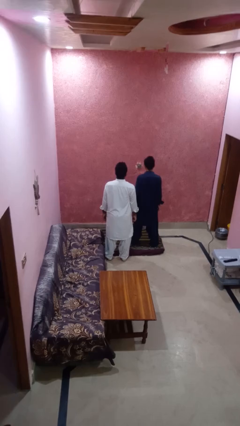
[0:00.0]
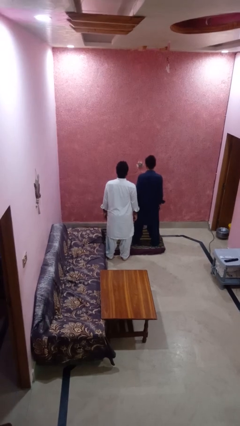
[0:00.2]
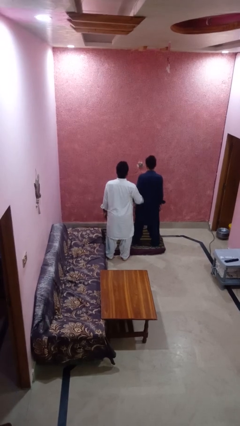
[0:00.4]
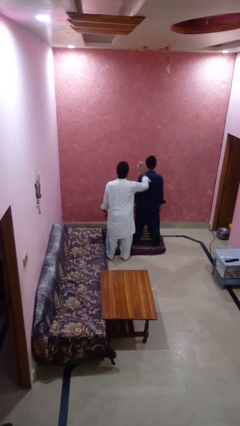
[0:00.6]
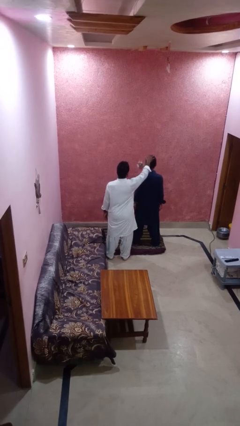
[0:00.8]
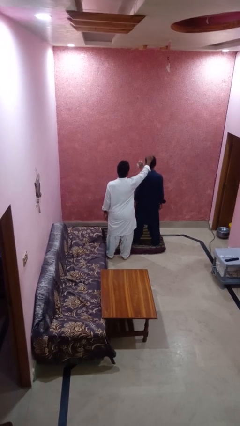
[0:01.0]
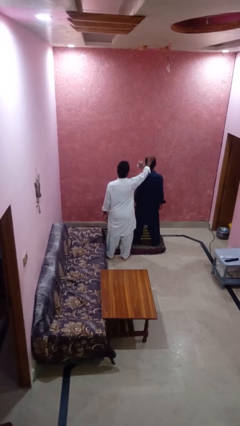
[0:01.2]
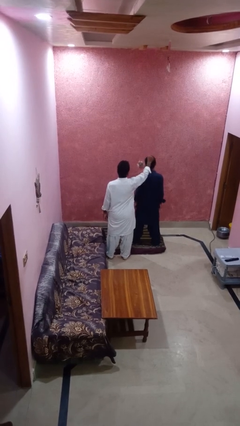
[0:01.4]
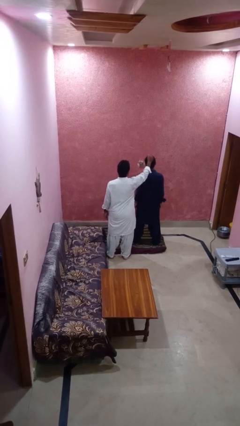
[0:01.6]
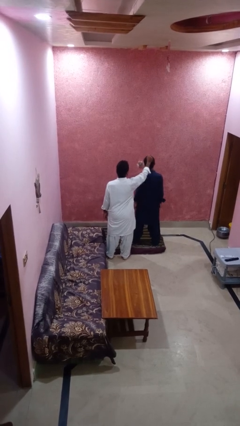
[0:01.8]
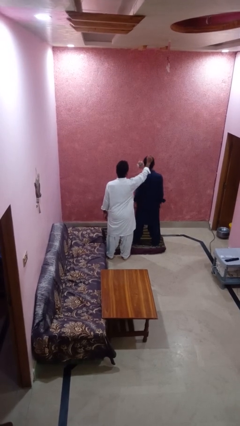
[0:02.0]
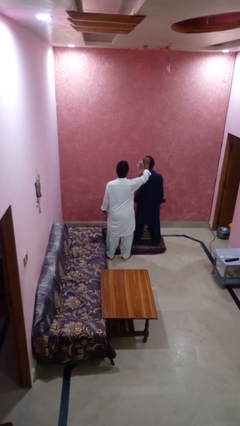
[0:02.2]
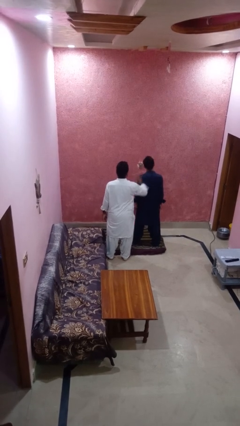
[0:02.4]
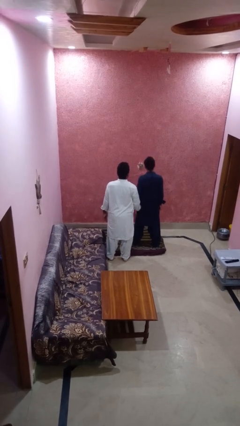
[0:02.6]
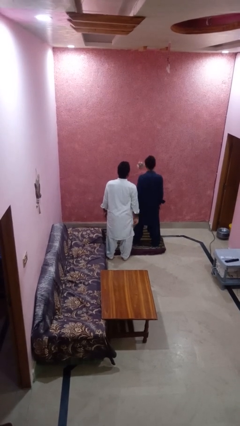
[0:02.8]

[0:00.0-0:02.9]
person grabs person by hair

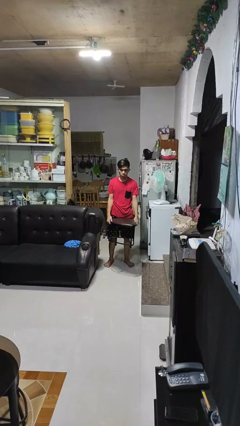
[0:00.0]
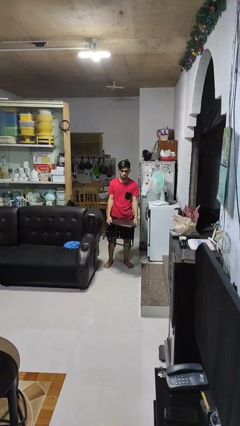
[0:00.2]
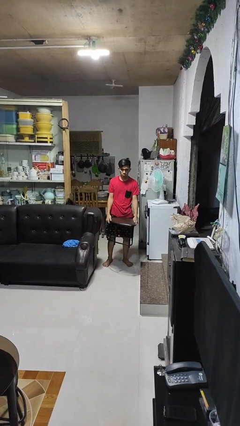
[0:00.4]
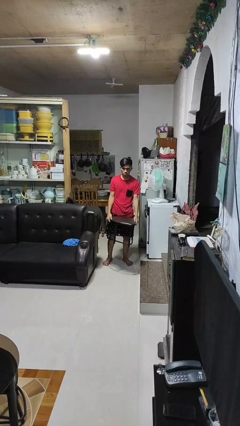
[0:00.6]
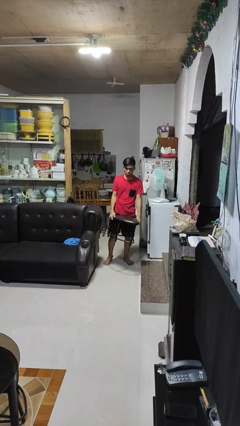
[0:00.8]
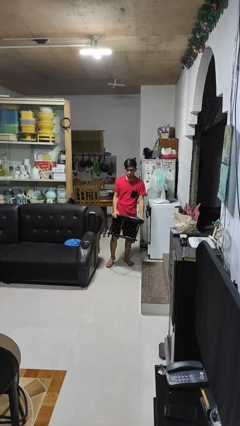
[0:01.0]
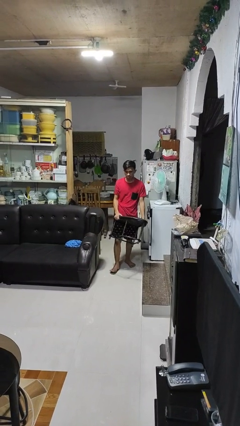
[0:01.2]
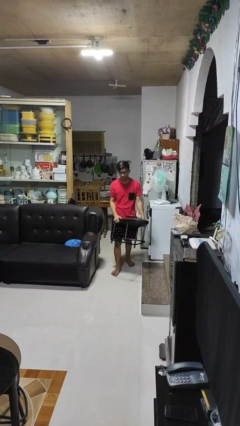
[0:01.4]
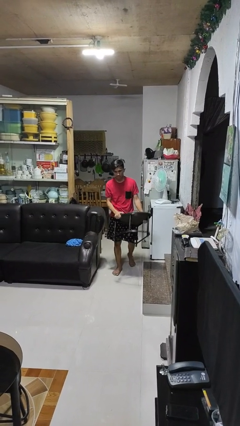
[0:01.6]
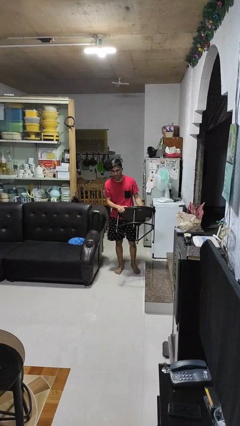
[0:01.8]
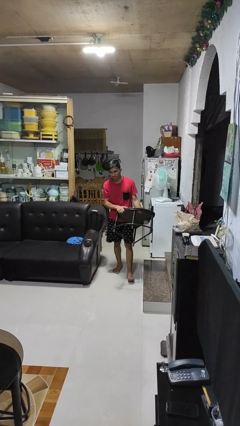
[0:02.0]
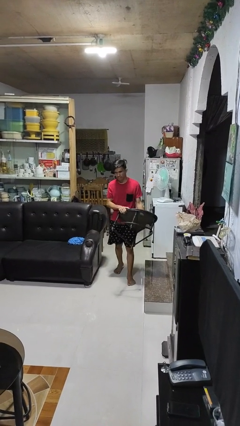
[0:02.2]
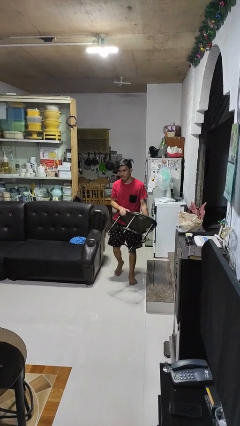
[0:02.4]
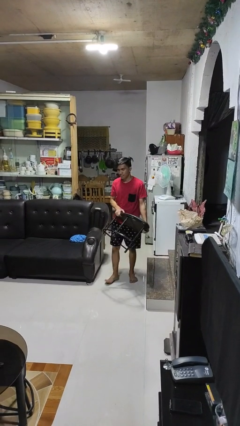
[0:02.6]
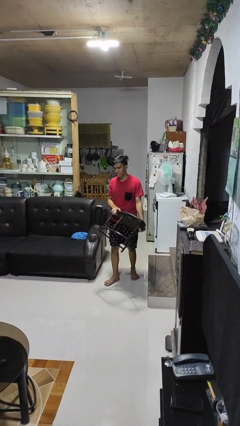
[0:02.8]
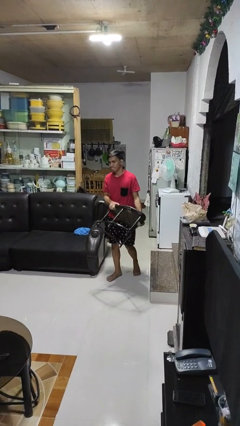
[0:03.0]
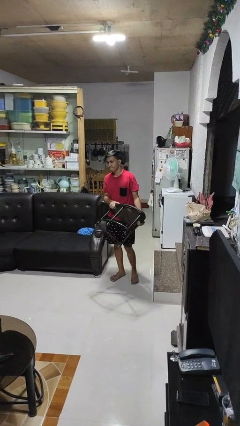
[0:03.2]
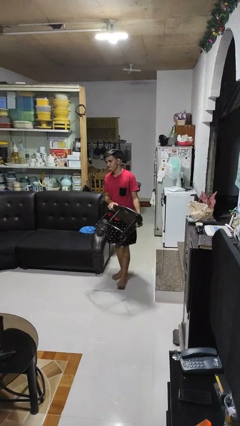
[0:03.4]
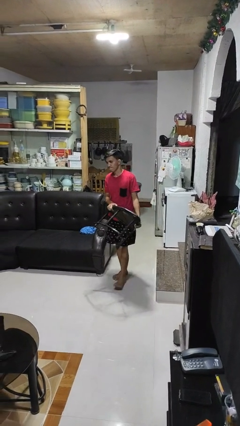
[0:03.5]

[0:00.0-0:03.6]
person carries furniture

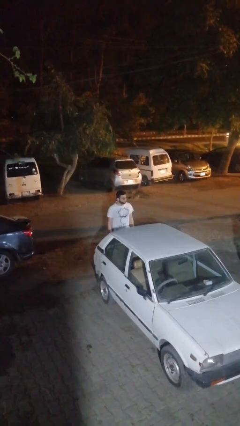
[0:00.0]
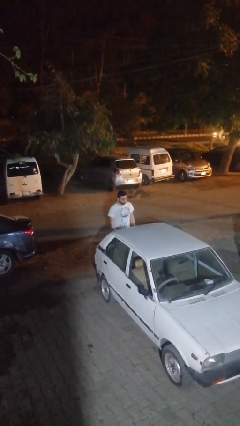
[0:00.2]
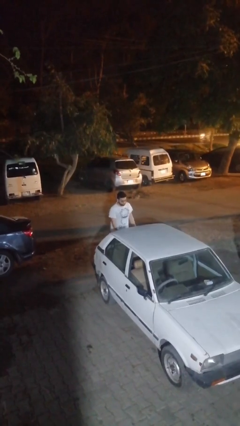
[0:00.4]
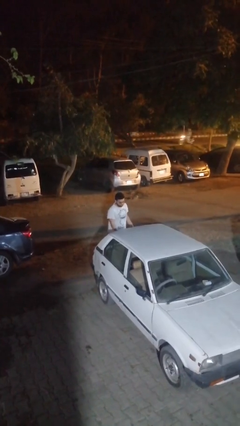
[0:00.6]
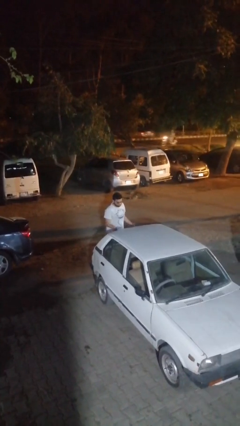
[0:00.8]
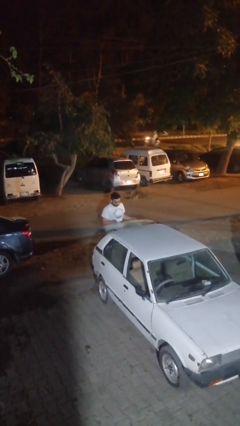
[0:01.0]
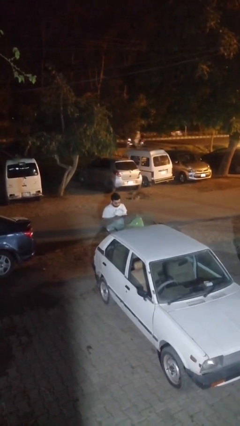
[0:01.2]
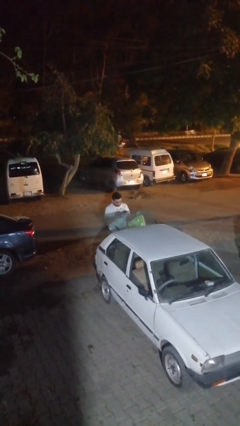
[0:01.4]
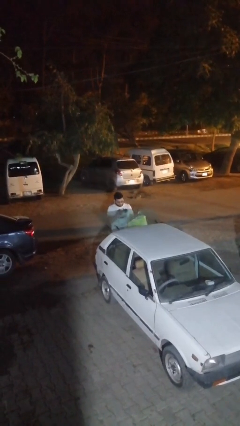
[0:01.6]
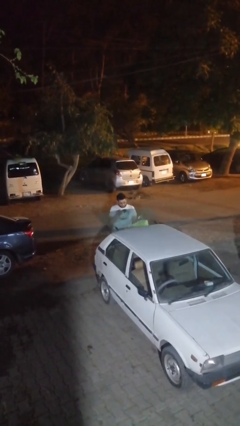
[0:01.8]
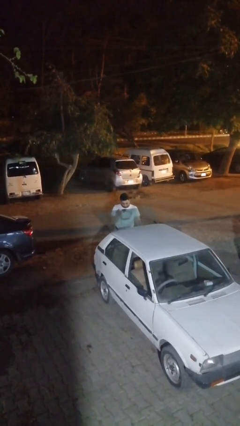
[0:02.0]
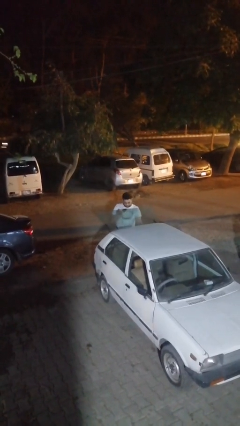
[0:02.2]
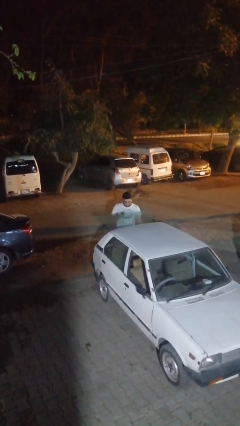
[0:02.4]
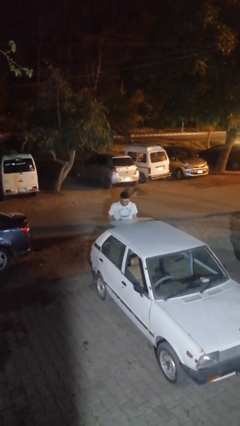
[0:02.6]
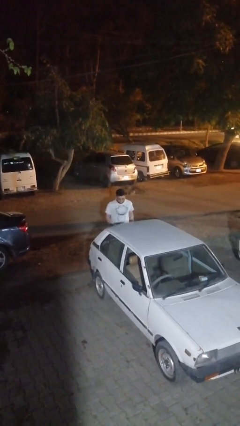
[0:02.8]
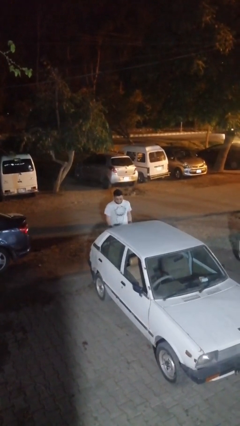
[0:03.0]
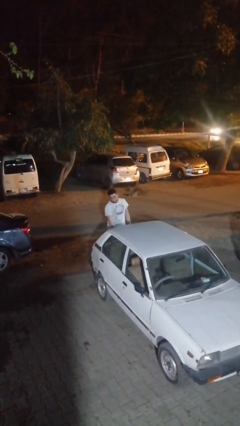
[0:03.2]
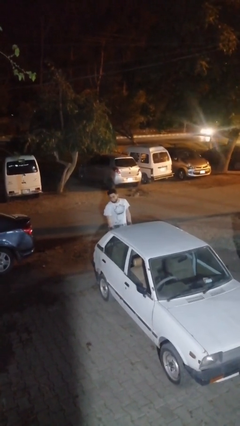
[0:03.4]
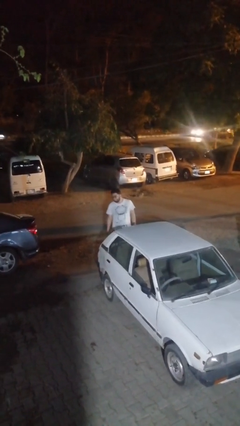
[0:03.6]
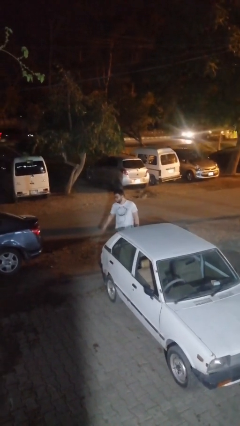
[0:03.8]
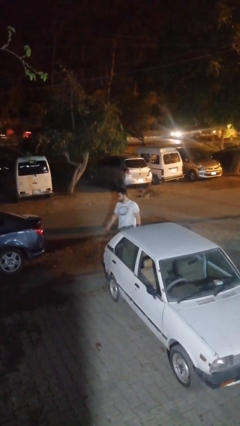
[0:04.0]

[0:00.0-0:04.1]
person loads car

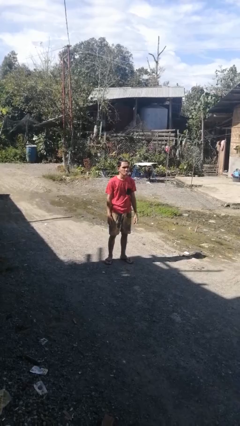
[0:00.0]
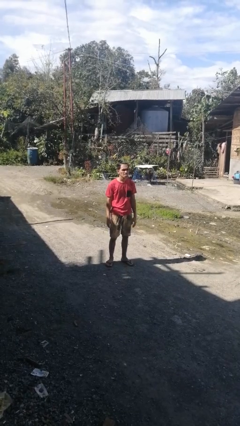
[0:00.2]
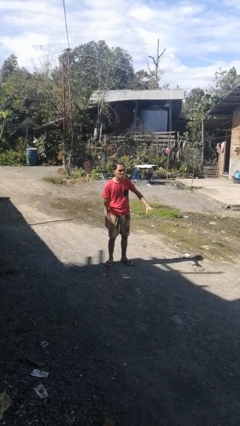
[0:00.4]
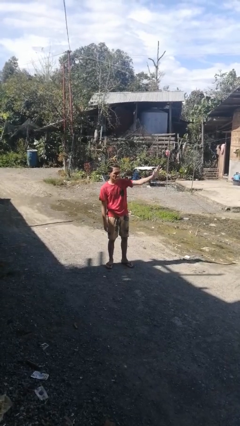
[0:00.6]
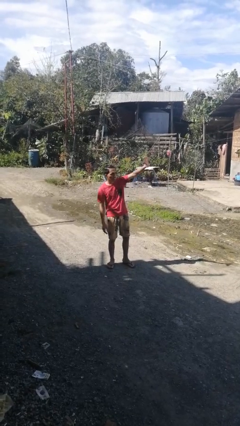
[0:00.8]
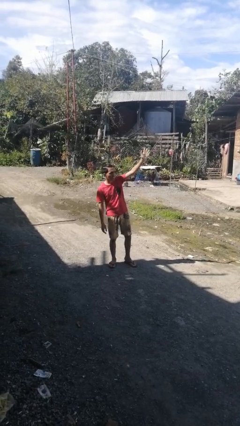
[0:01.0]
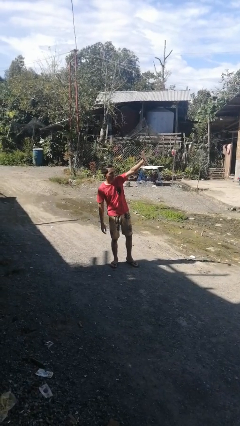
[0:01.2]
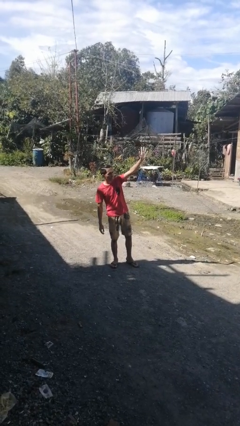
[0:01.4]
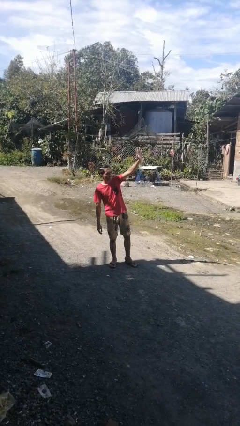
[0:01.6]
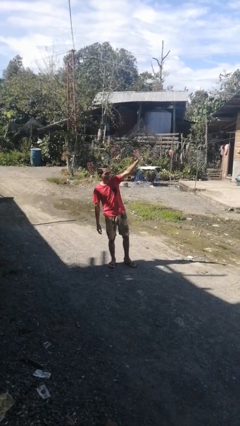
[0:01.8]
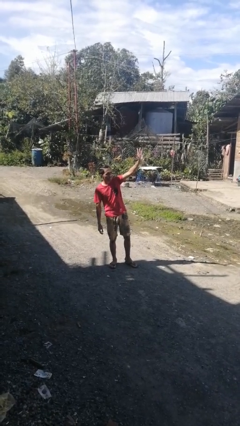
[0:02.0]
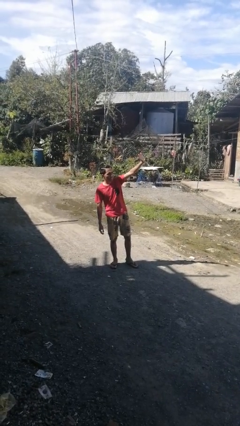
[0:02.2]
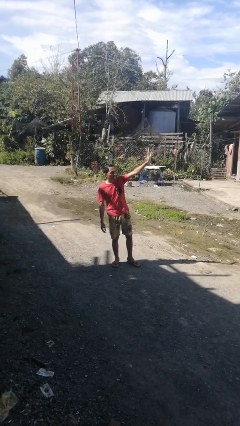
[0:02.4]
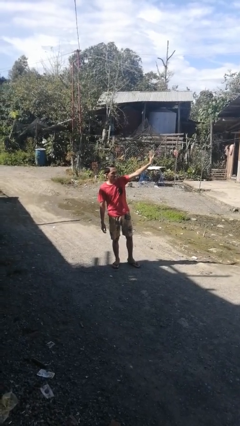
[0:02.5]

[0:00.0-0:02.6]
person waves at person

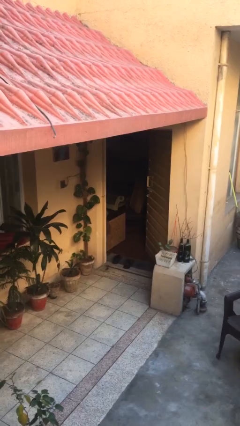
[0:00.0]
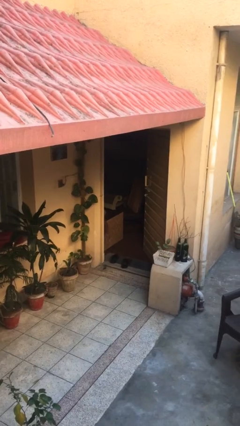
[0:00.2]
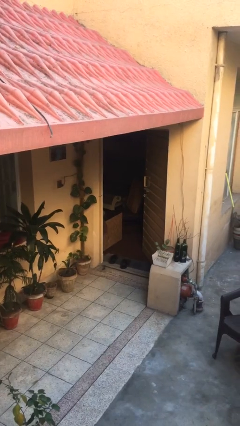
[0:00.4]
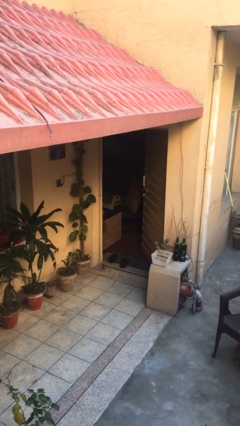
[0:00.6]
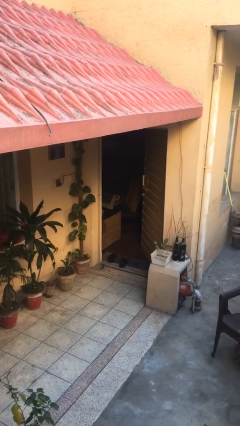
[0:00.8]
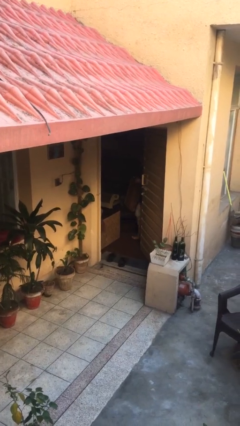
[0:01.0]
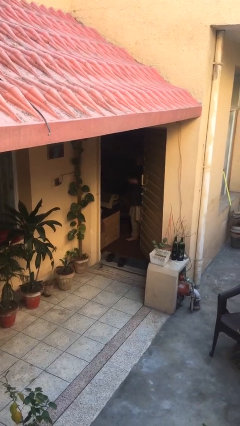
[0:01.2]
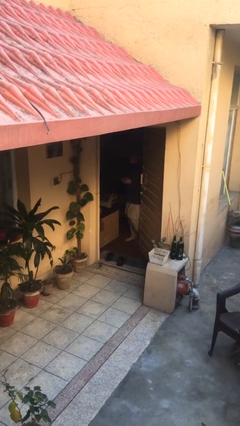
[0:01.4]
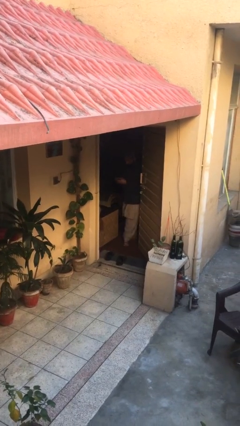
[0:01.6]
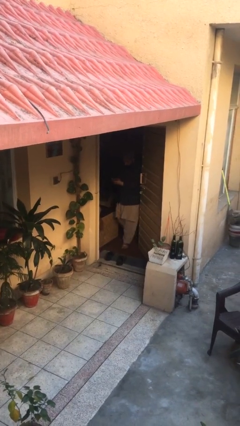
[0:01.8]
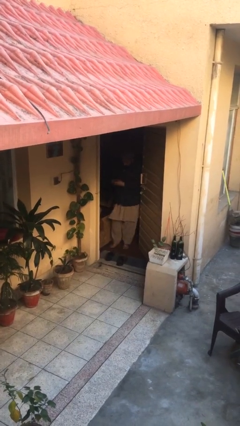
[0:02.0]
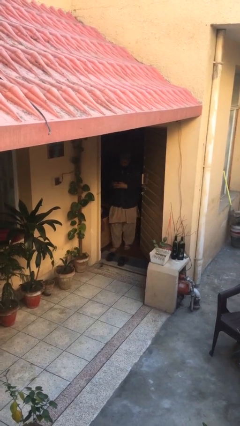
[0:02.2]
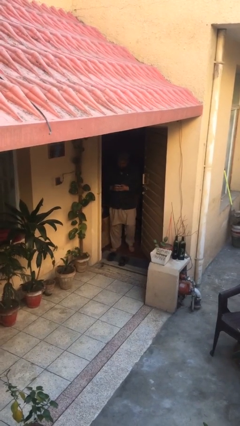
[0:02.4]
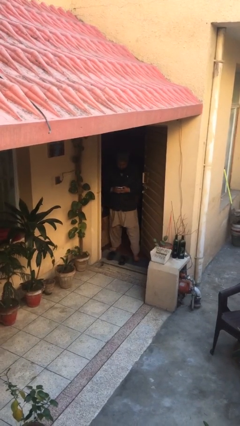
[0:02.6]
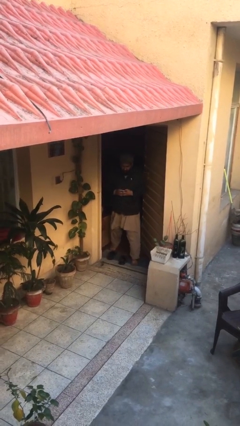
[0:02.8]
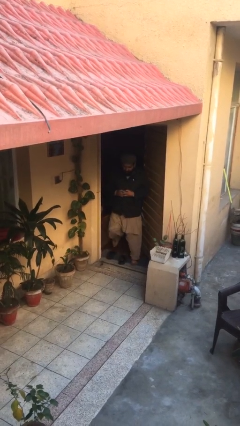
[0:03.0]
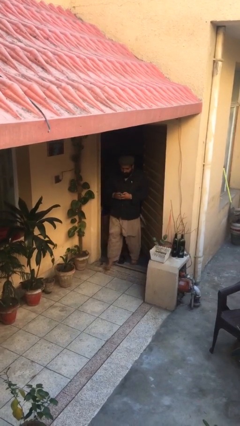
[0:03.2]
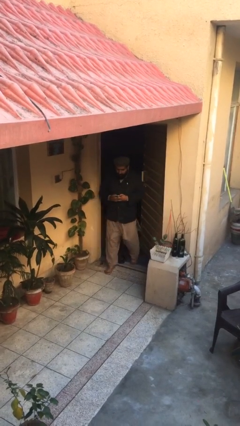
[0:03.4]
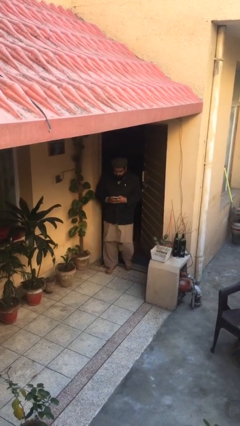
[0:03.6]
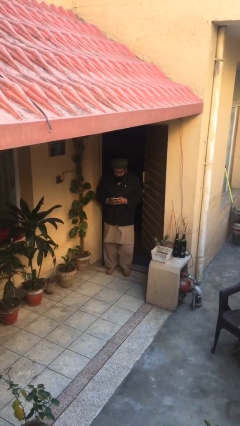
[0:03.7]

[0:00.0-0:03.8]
person enters scene through structure

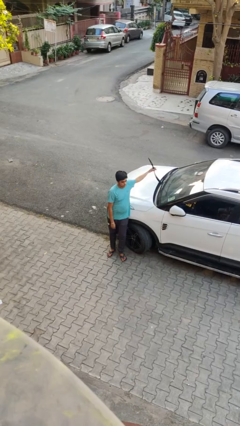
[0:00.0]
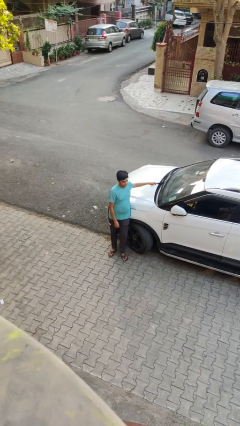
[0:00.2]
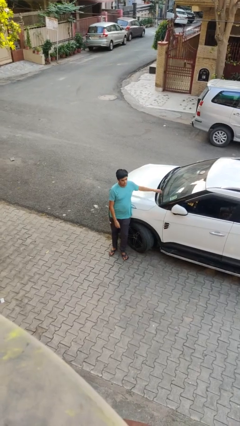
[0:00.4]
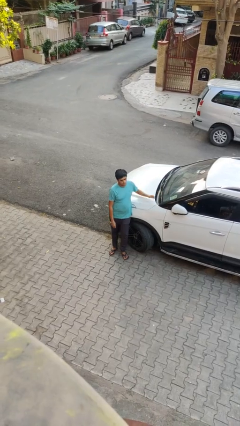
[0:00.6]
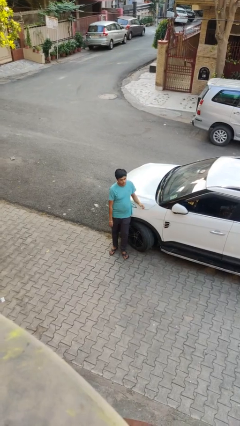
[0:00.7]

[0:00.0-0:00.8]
person flips down car wipers
